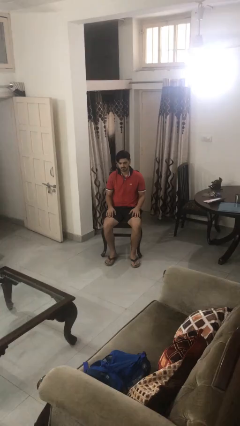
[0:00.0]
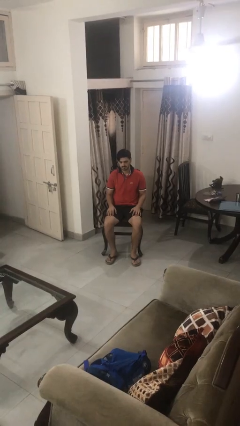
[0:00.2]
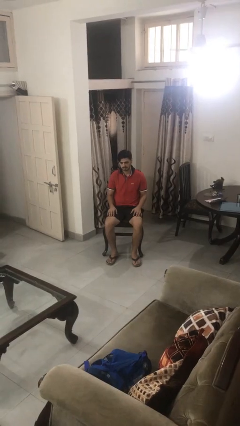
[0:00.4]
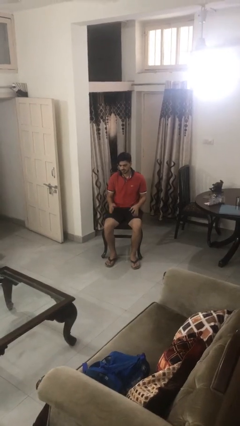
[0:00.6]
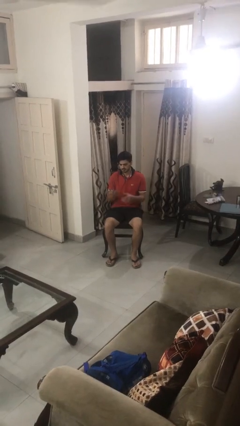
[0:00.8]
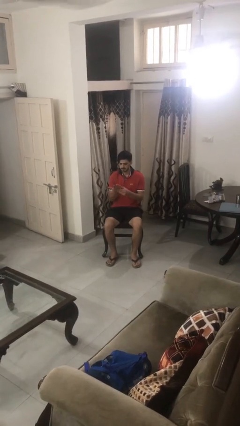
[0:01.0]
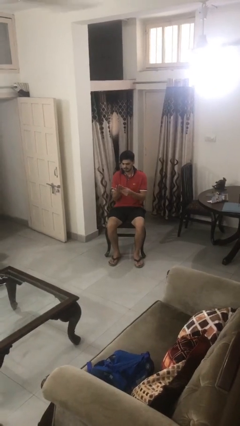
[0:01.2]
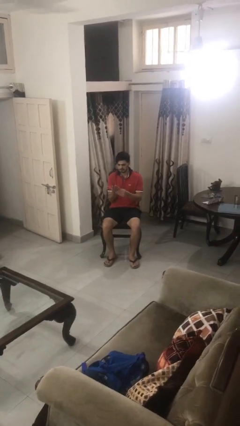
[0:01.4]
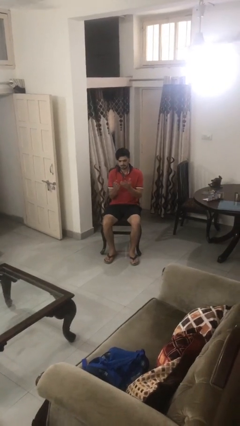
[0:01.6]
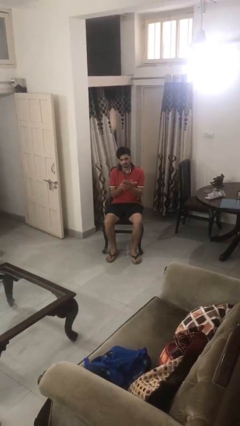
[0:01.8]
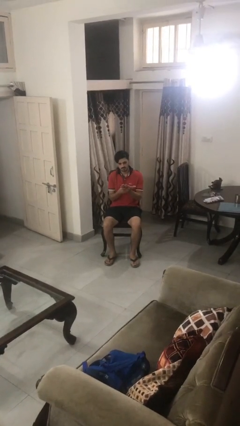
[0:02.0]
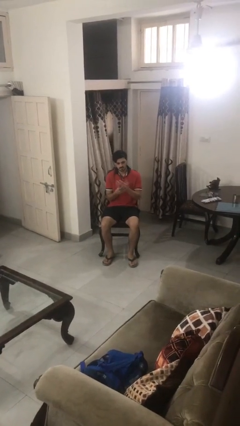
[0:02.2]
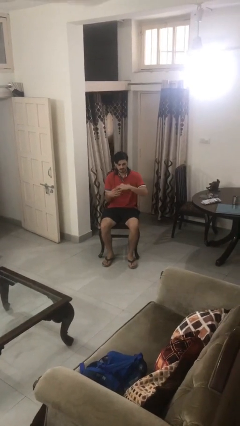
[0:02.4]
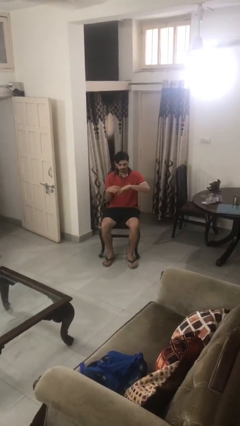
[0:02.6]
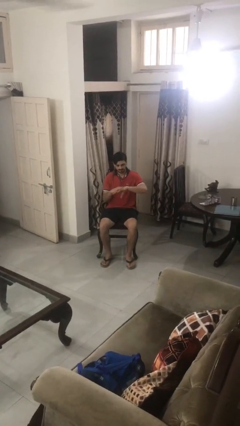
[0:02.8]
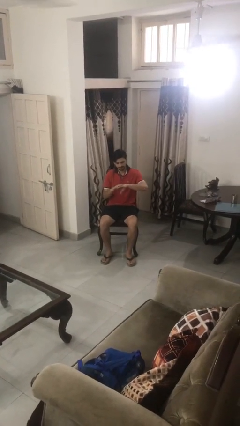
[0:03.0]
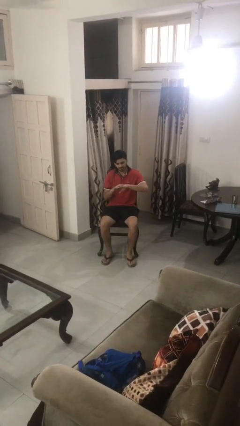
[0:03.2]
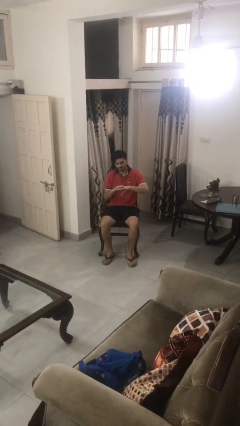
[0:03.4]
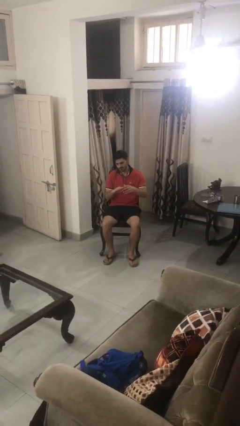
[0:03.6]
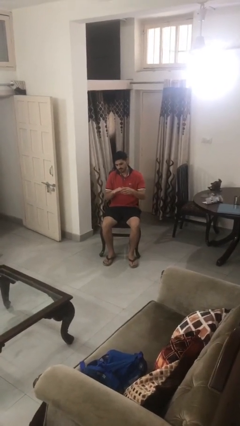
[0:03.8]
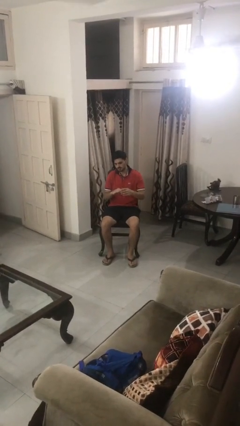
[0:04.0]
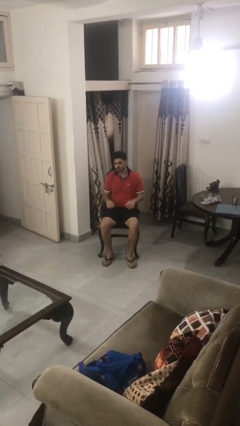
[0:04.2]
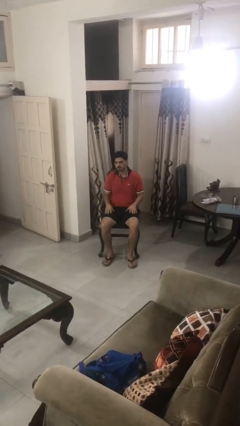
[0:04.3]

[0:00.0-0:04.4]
person looks at hands in lap

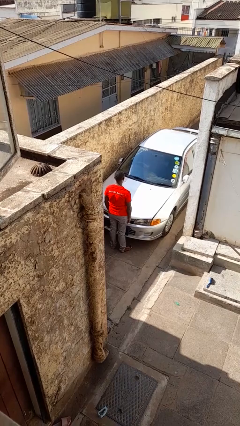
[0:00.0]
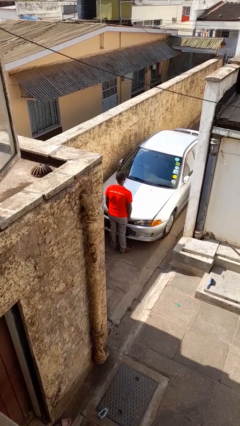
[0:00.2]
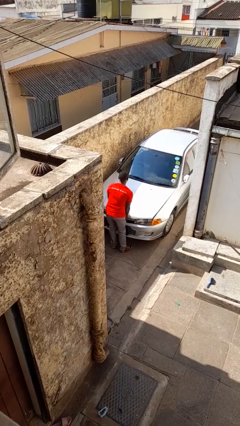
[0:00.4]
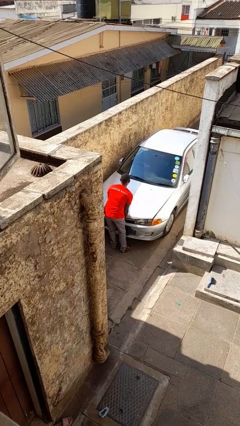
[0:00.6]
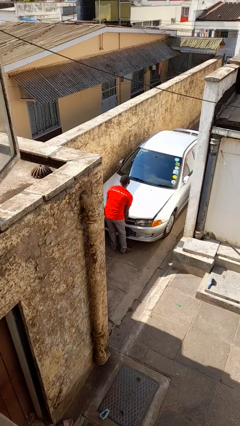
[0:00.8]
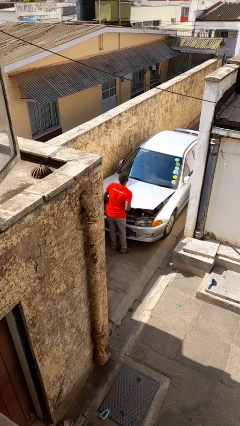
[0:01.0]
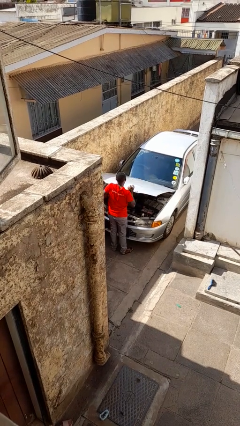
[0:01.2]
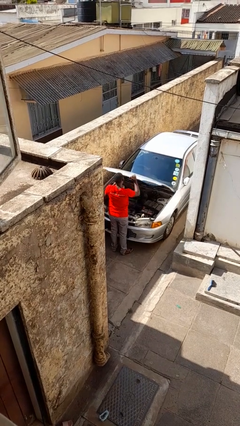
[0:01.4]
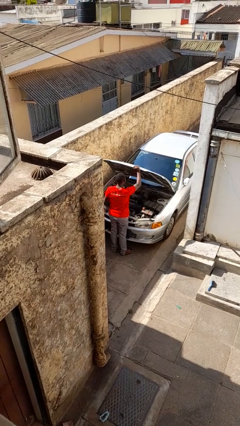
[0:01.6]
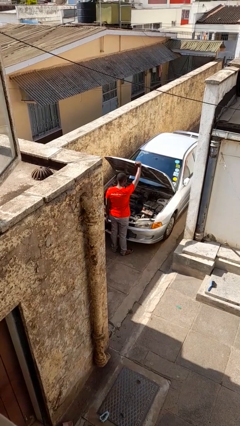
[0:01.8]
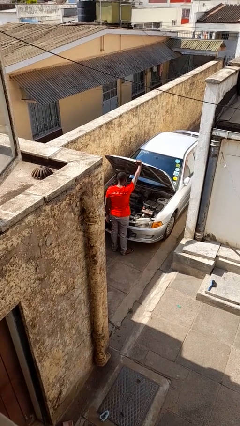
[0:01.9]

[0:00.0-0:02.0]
person opens car hood

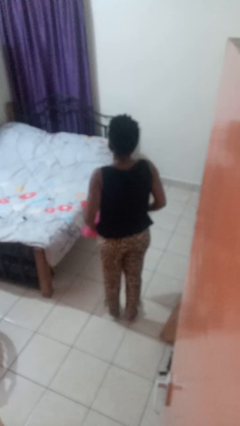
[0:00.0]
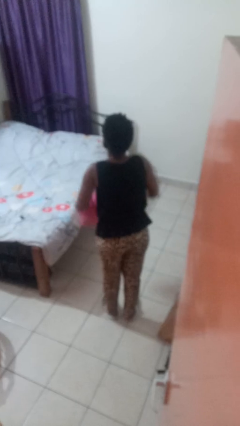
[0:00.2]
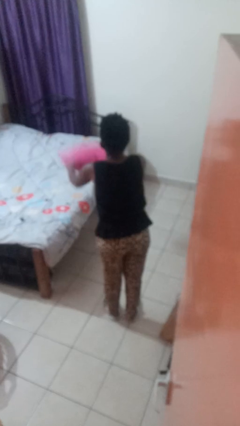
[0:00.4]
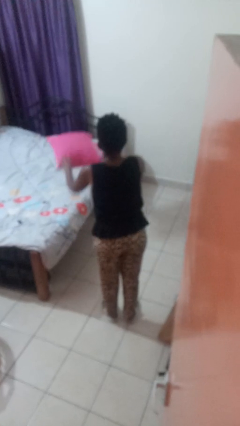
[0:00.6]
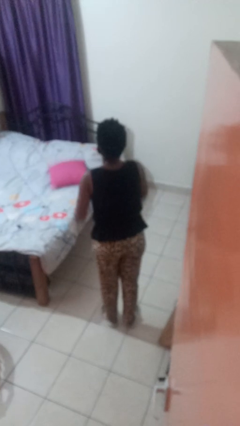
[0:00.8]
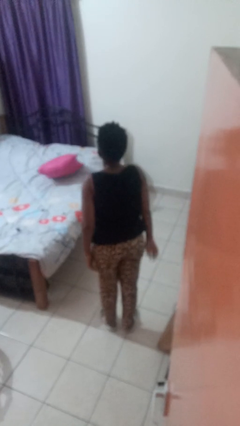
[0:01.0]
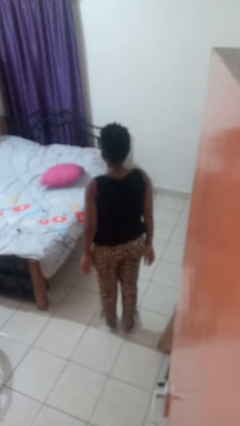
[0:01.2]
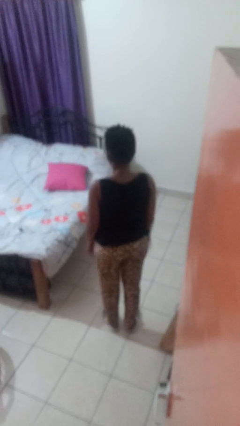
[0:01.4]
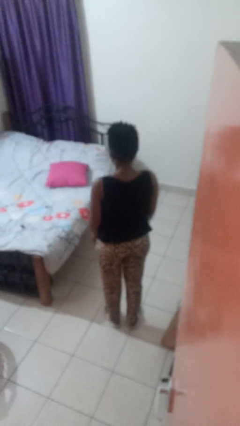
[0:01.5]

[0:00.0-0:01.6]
person throws object on bed

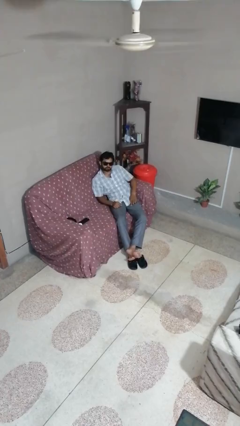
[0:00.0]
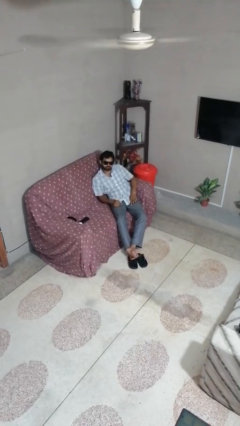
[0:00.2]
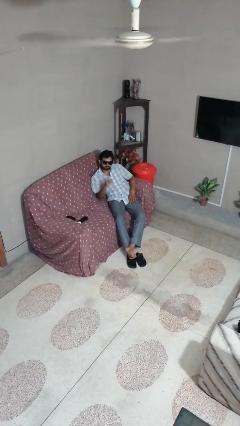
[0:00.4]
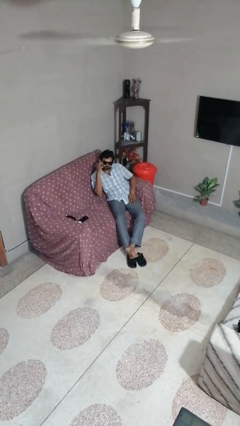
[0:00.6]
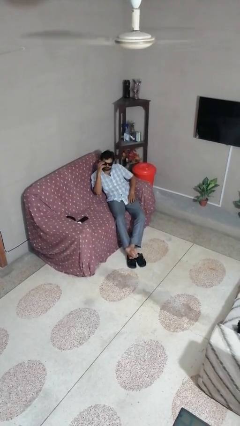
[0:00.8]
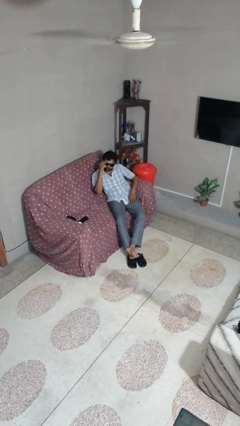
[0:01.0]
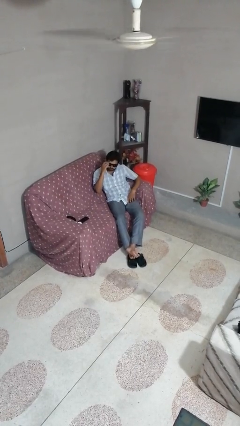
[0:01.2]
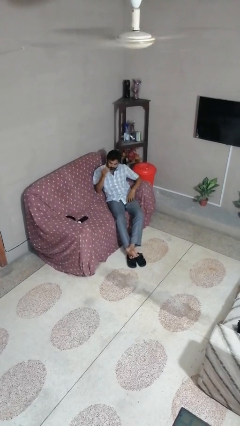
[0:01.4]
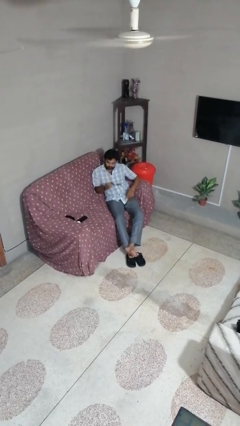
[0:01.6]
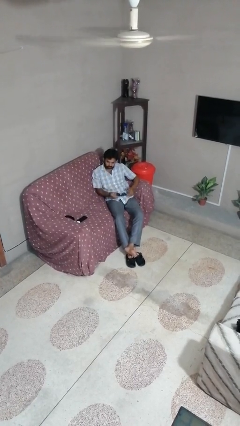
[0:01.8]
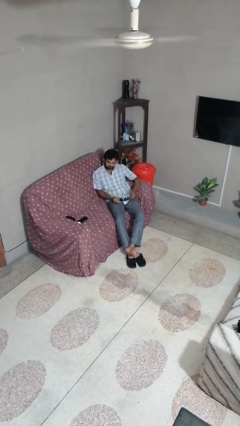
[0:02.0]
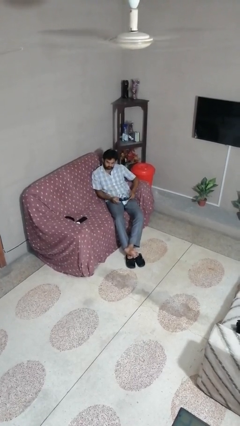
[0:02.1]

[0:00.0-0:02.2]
person takes off sunglasses

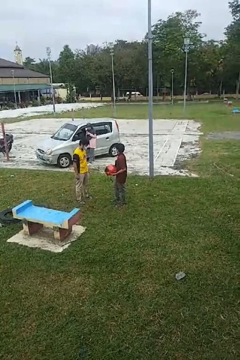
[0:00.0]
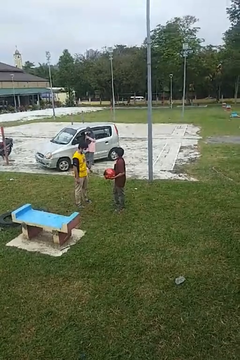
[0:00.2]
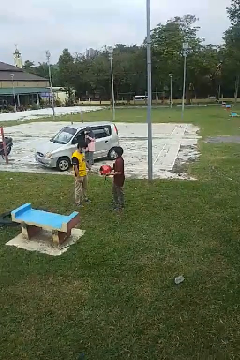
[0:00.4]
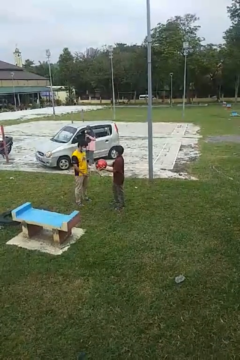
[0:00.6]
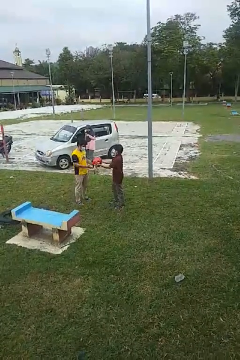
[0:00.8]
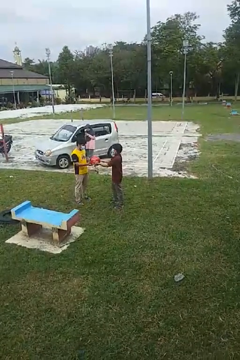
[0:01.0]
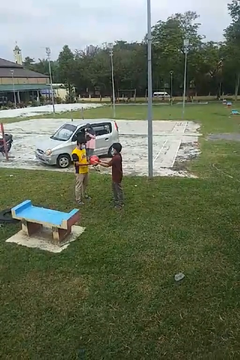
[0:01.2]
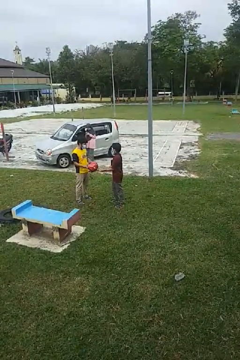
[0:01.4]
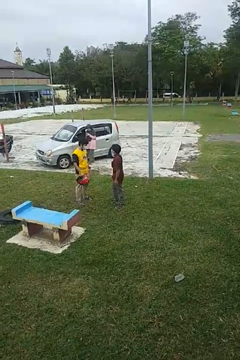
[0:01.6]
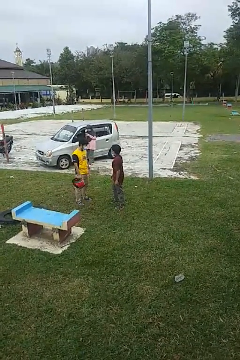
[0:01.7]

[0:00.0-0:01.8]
person transfers object to person

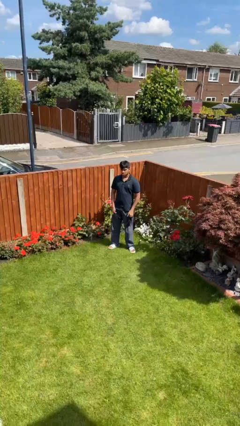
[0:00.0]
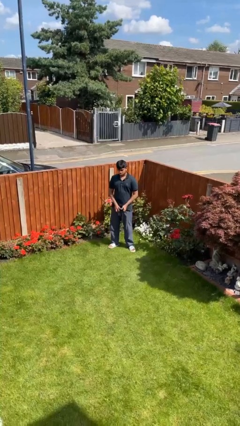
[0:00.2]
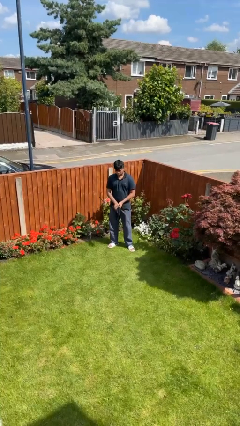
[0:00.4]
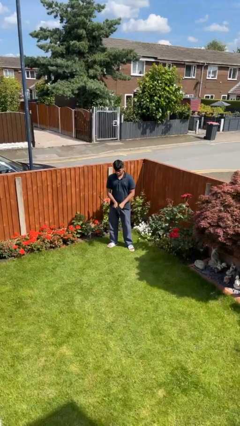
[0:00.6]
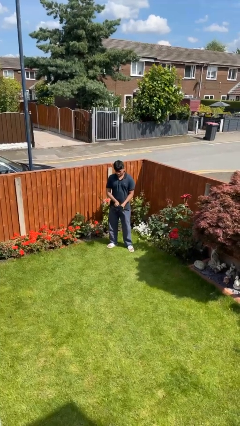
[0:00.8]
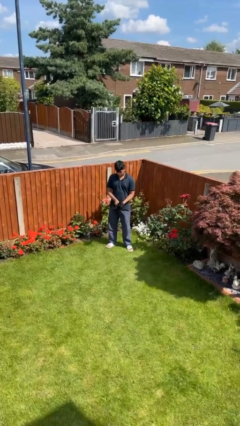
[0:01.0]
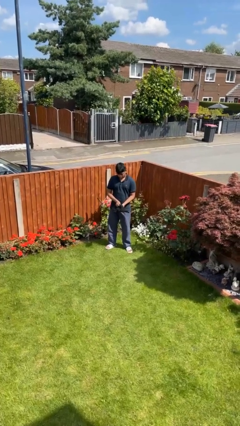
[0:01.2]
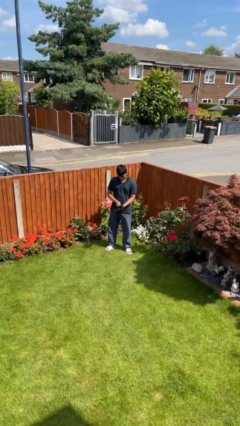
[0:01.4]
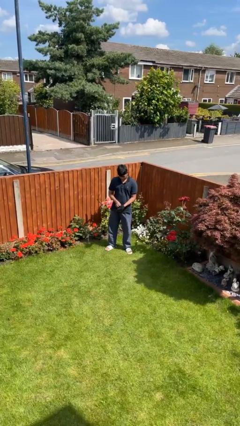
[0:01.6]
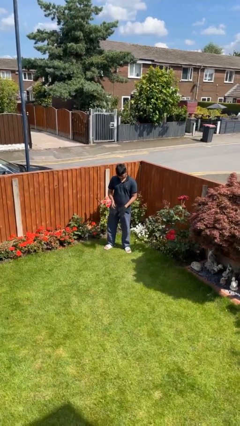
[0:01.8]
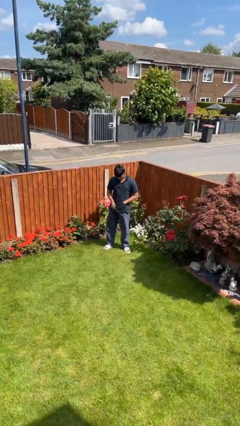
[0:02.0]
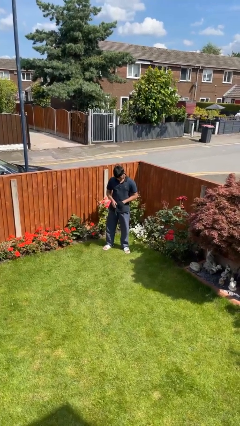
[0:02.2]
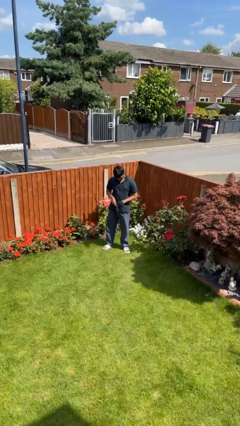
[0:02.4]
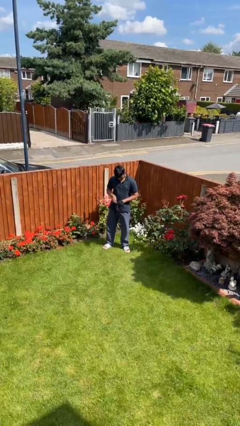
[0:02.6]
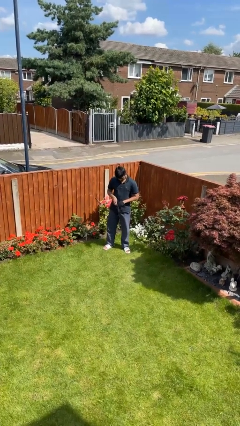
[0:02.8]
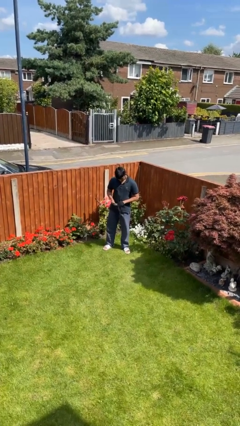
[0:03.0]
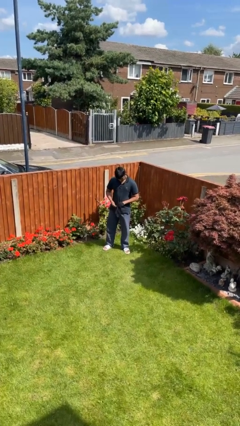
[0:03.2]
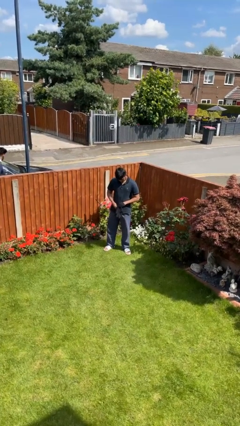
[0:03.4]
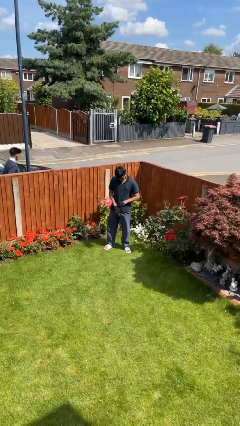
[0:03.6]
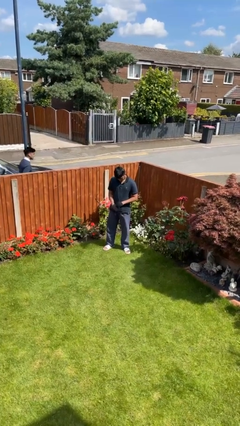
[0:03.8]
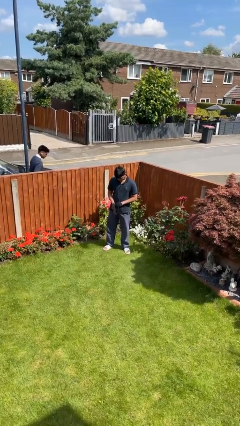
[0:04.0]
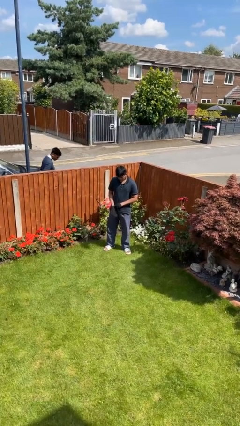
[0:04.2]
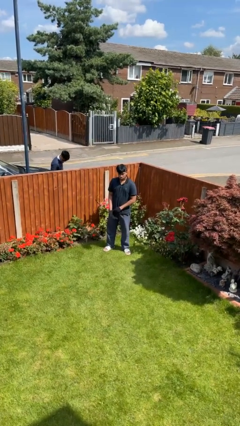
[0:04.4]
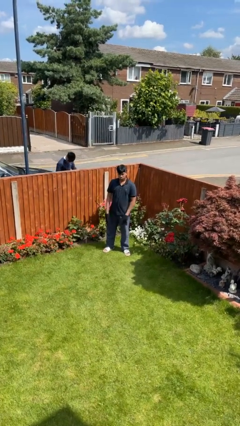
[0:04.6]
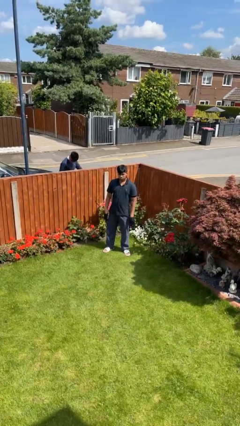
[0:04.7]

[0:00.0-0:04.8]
person puts on gloves

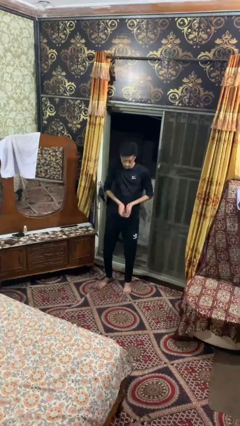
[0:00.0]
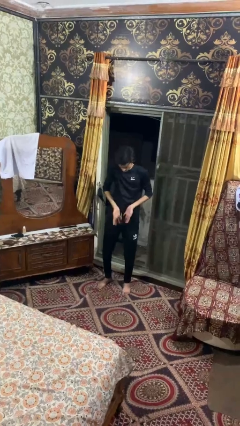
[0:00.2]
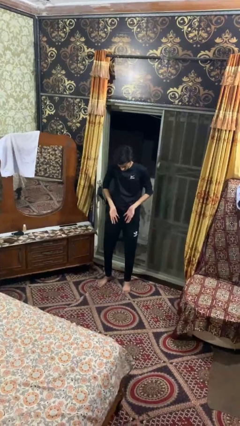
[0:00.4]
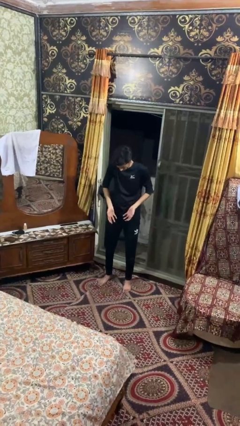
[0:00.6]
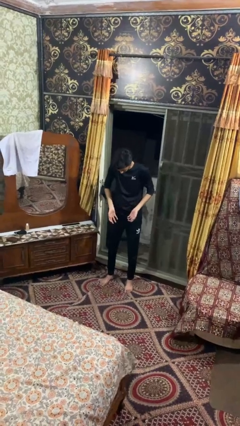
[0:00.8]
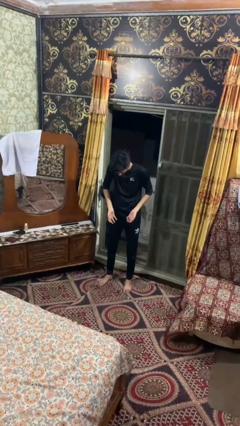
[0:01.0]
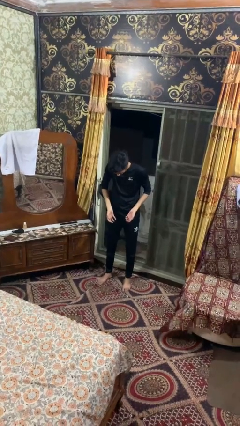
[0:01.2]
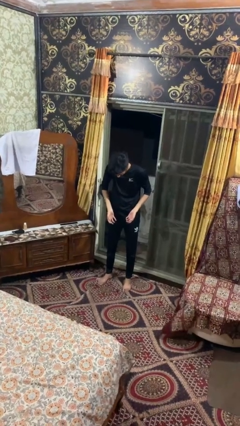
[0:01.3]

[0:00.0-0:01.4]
person catches dropped object
